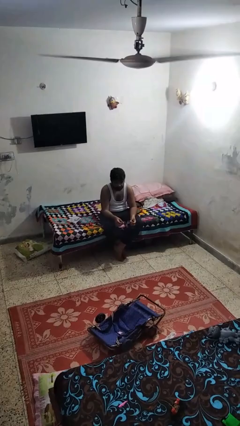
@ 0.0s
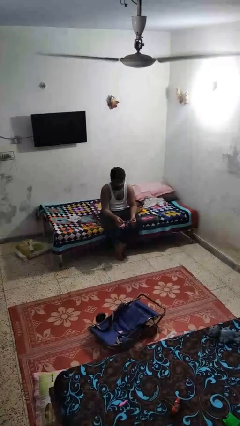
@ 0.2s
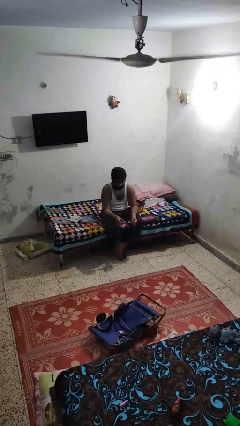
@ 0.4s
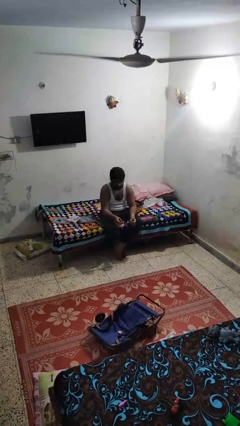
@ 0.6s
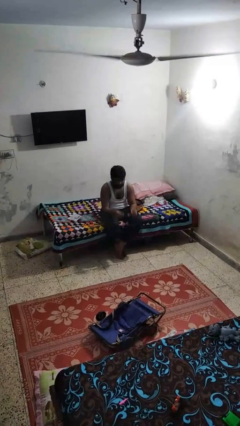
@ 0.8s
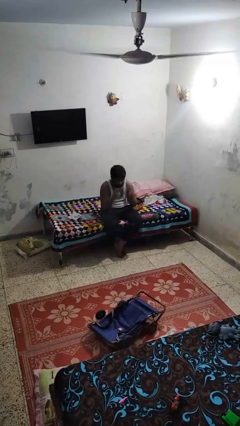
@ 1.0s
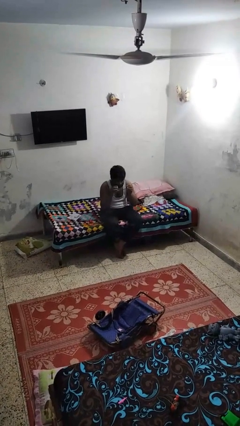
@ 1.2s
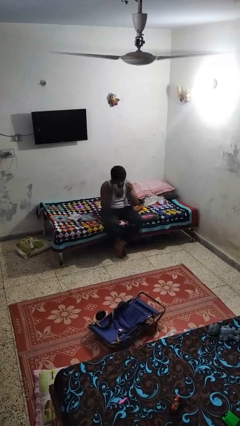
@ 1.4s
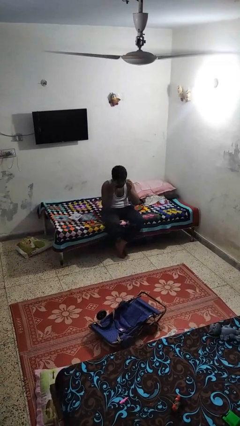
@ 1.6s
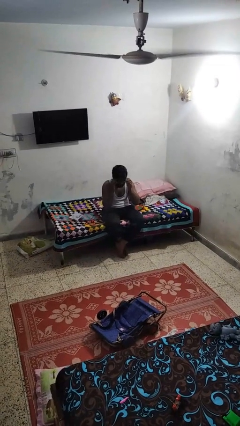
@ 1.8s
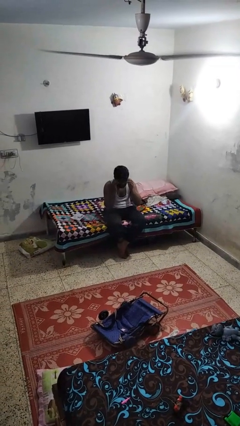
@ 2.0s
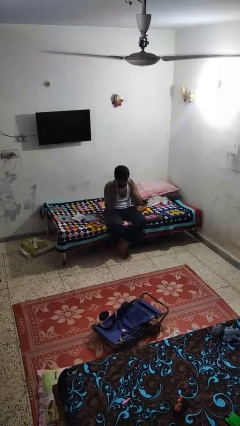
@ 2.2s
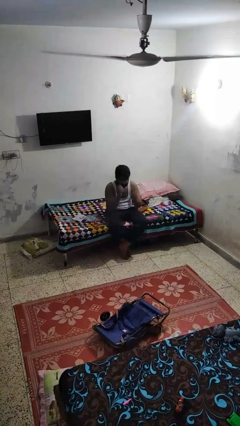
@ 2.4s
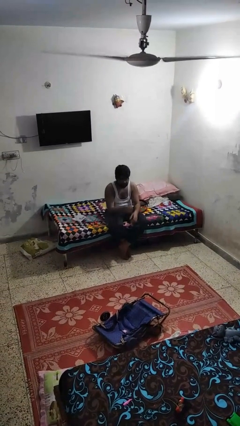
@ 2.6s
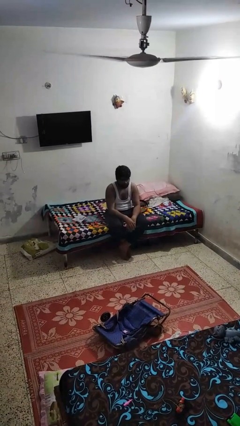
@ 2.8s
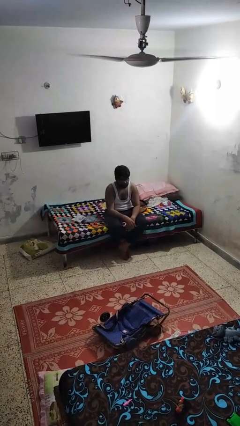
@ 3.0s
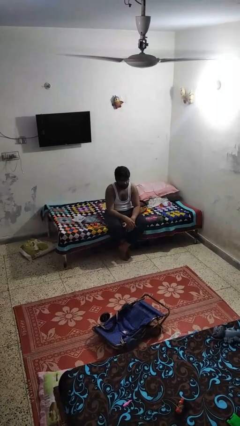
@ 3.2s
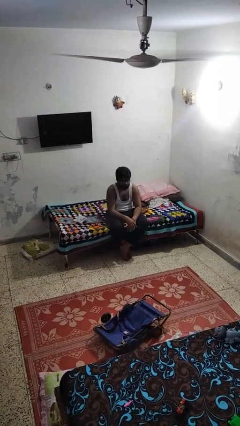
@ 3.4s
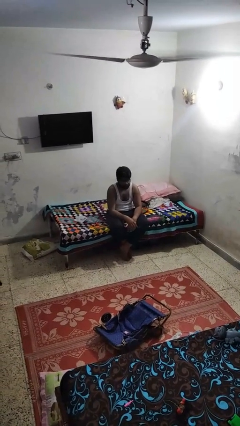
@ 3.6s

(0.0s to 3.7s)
person puts on glasses

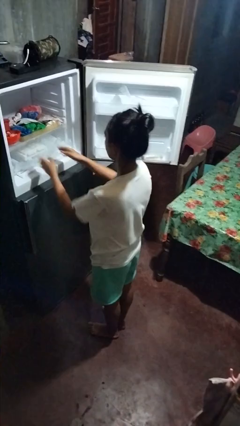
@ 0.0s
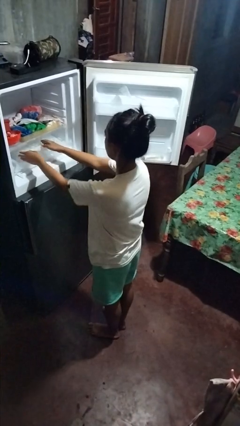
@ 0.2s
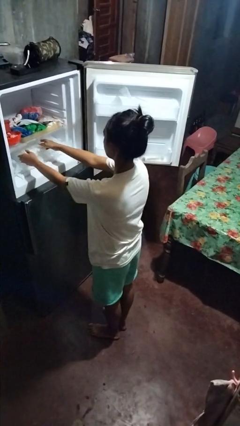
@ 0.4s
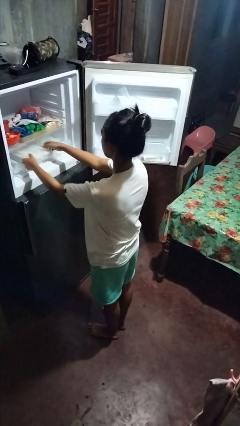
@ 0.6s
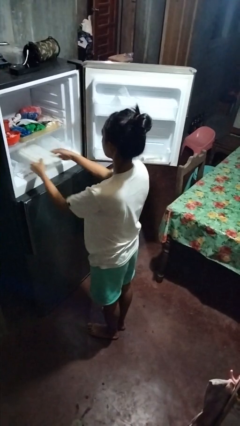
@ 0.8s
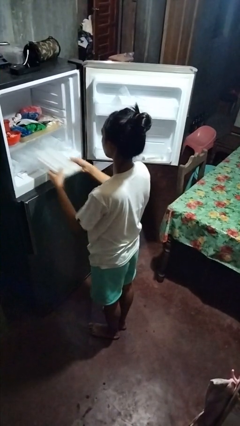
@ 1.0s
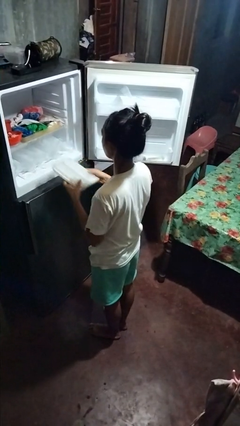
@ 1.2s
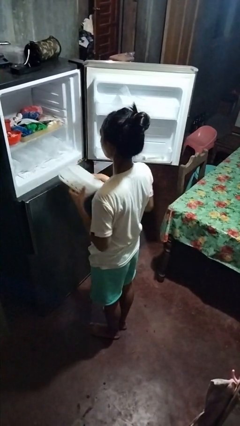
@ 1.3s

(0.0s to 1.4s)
person takes object from refrigerator

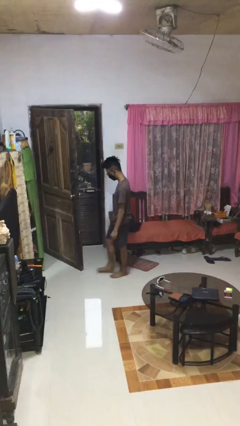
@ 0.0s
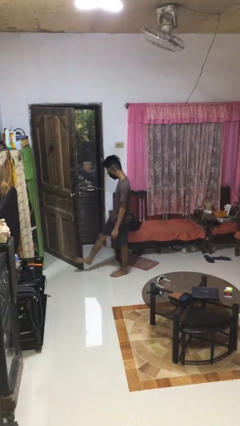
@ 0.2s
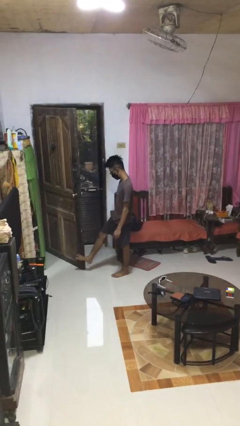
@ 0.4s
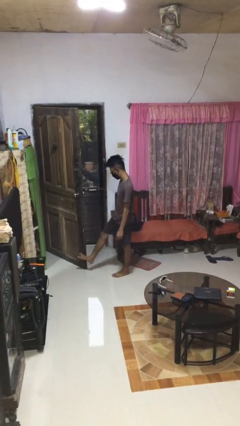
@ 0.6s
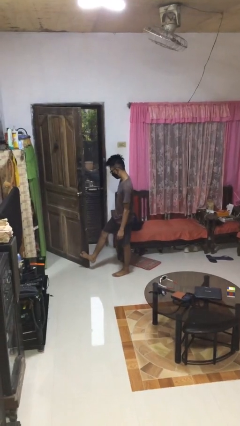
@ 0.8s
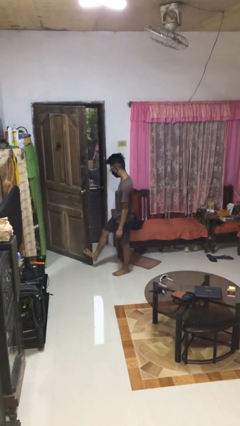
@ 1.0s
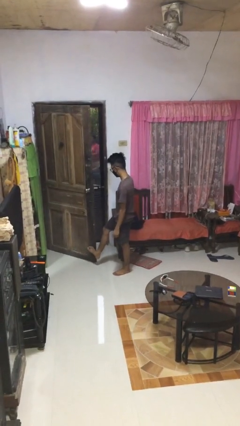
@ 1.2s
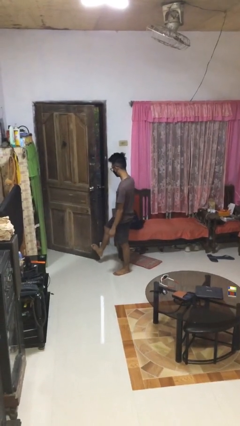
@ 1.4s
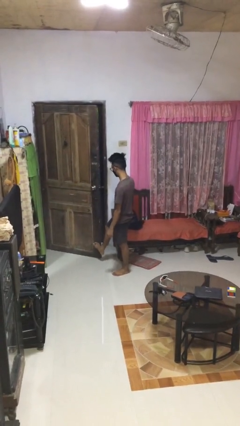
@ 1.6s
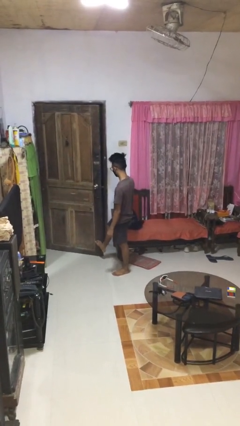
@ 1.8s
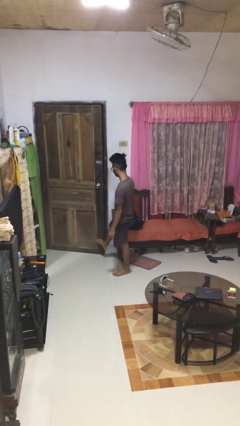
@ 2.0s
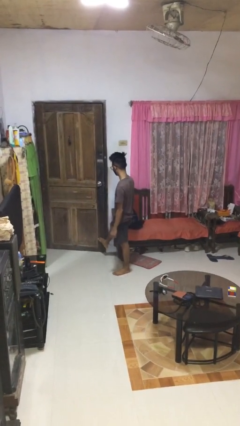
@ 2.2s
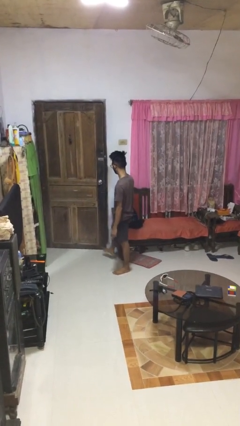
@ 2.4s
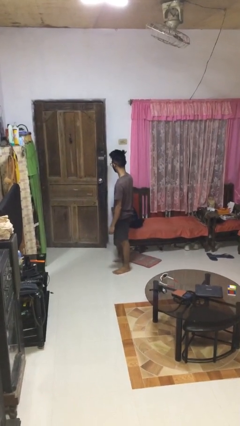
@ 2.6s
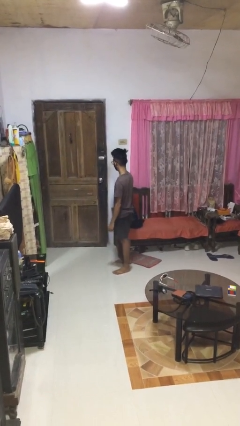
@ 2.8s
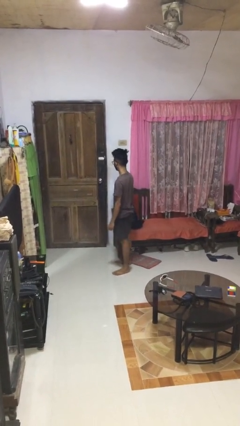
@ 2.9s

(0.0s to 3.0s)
person closes door with foot

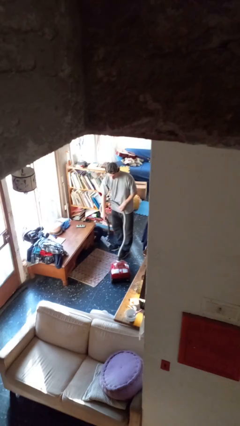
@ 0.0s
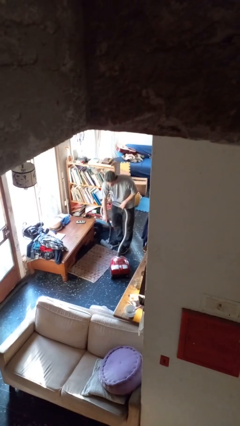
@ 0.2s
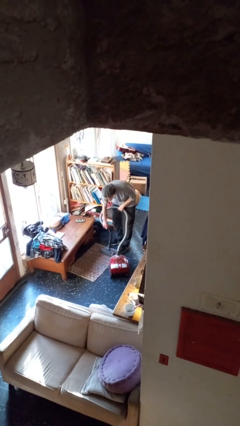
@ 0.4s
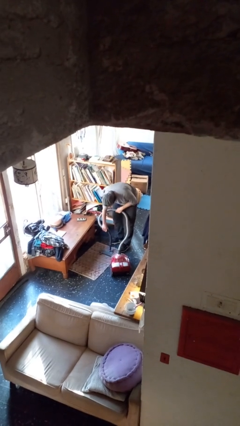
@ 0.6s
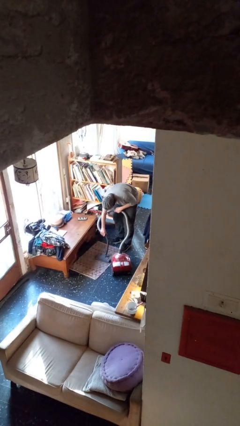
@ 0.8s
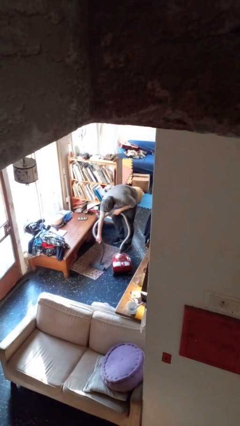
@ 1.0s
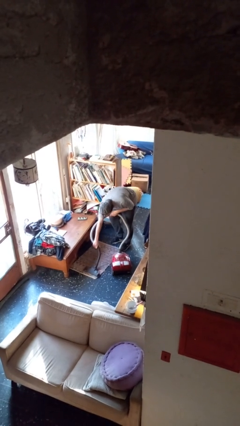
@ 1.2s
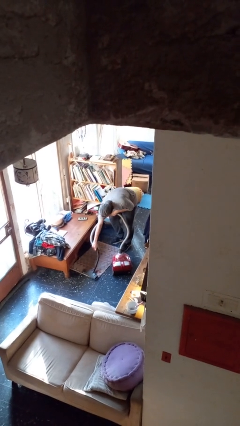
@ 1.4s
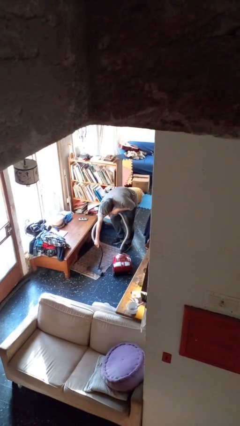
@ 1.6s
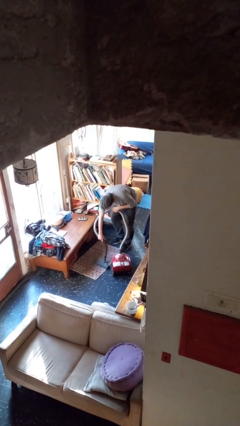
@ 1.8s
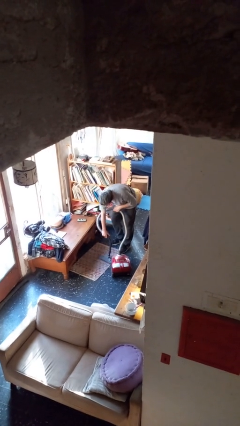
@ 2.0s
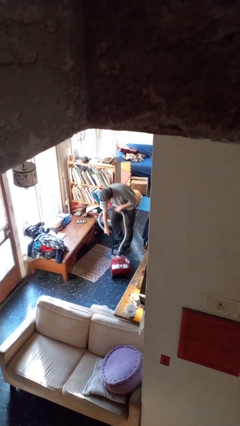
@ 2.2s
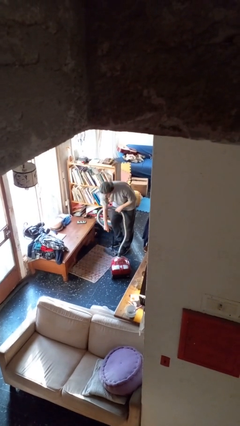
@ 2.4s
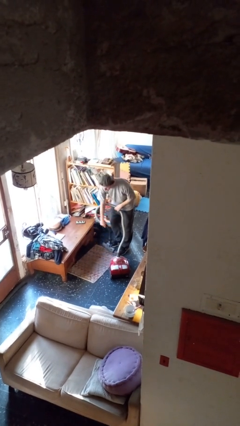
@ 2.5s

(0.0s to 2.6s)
person vacuums carpet

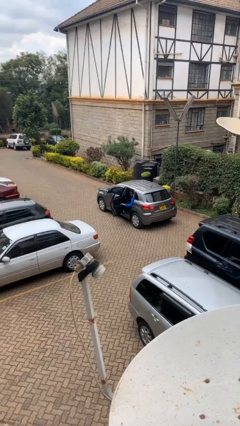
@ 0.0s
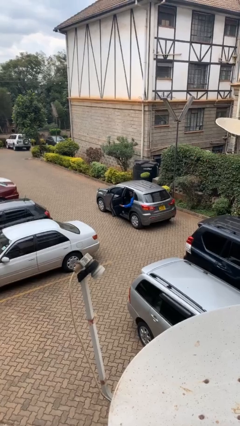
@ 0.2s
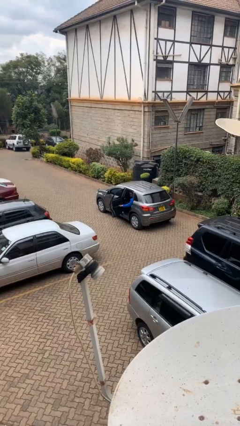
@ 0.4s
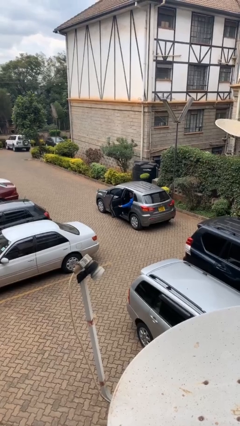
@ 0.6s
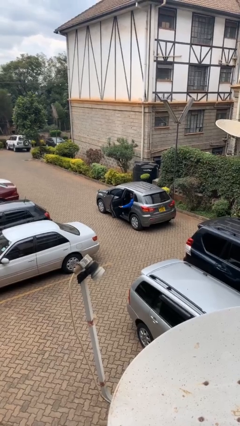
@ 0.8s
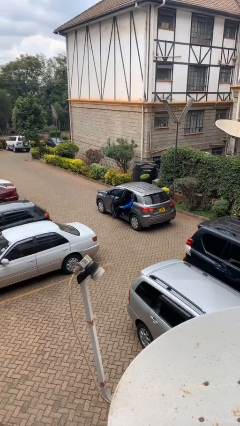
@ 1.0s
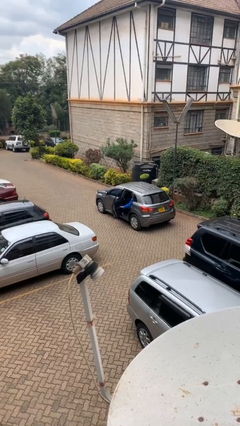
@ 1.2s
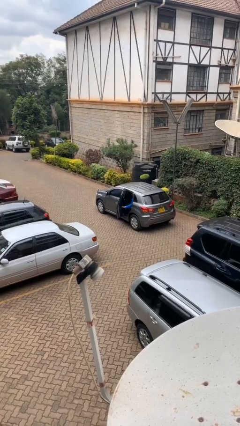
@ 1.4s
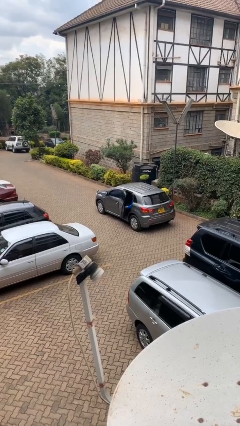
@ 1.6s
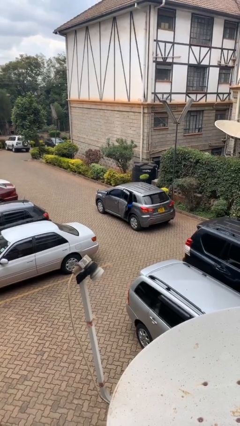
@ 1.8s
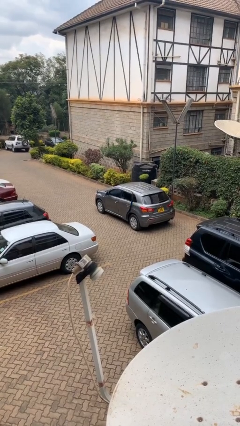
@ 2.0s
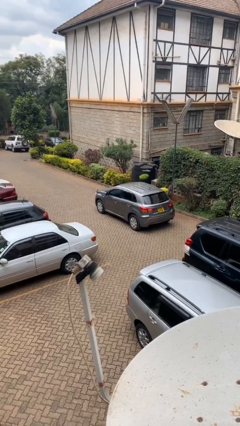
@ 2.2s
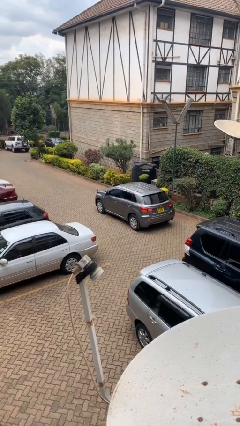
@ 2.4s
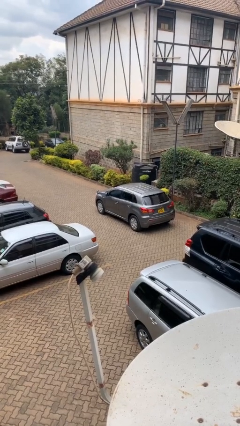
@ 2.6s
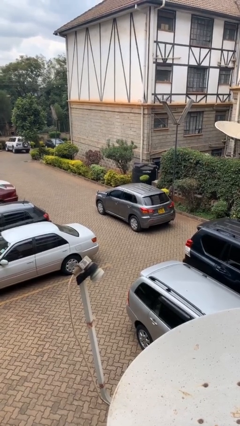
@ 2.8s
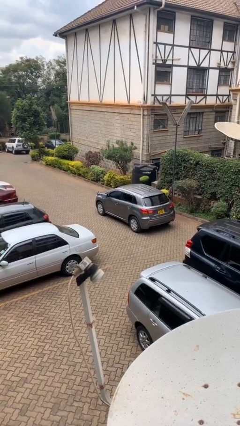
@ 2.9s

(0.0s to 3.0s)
person closes car door

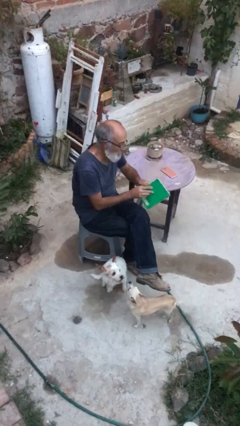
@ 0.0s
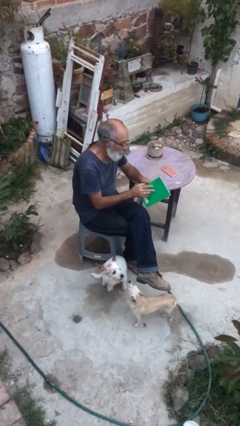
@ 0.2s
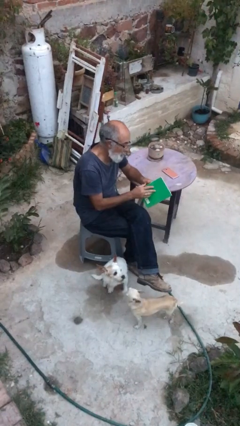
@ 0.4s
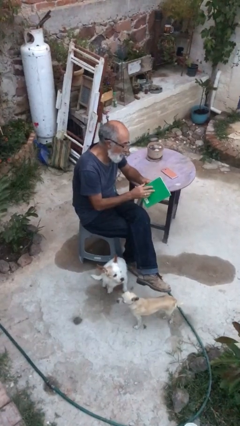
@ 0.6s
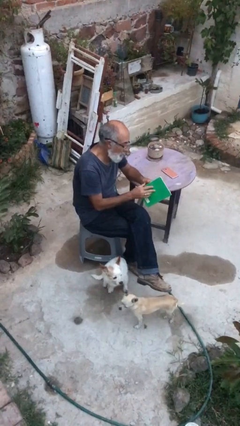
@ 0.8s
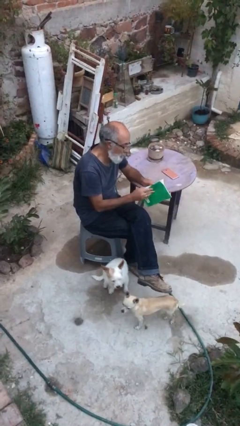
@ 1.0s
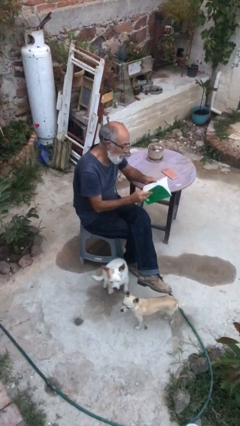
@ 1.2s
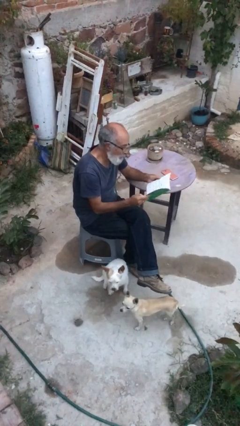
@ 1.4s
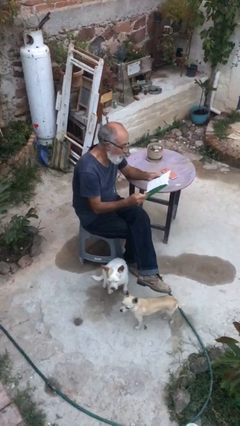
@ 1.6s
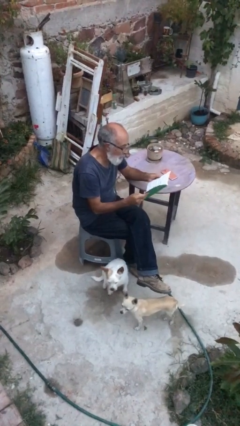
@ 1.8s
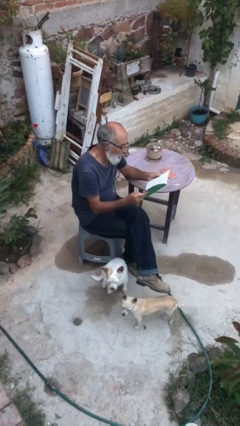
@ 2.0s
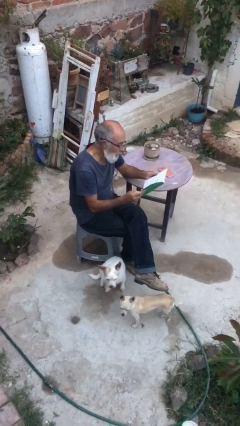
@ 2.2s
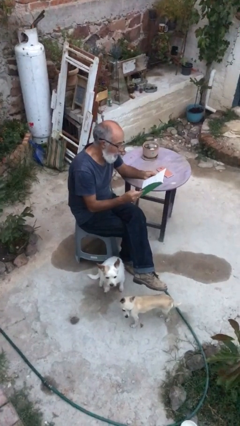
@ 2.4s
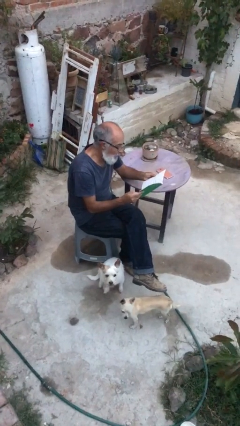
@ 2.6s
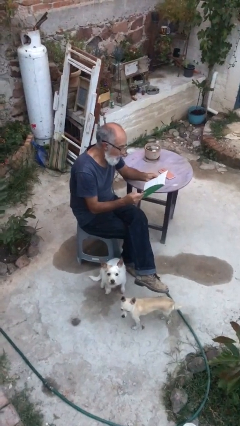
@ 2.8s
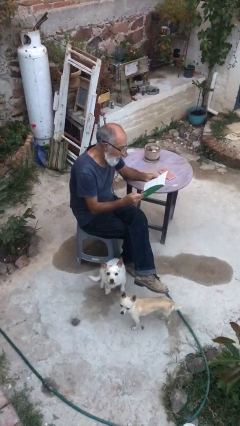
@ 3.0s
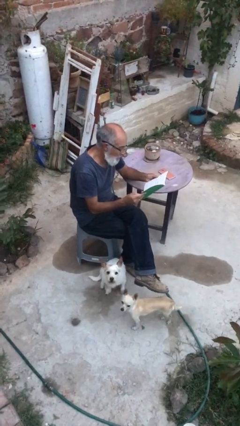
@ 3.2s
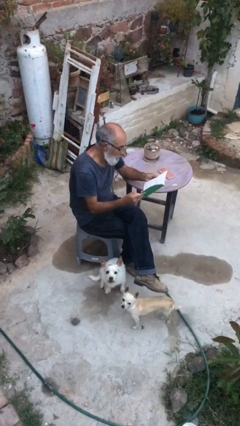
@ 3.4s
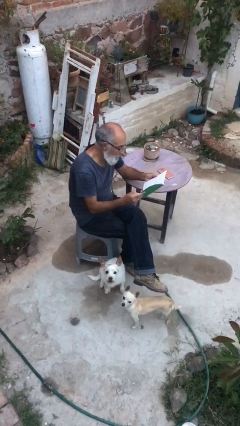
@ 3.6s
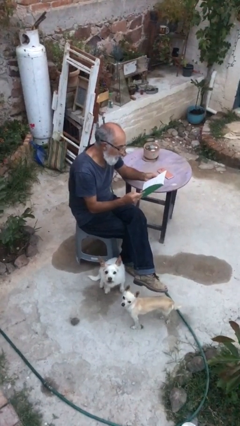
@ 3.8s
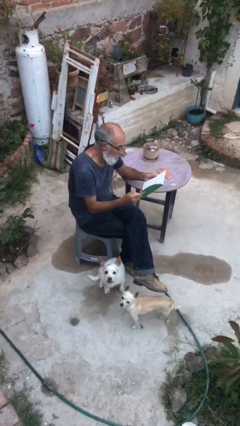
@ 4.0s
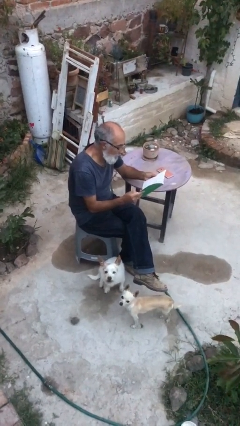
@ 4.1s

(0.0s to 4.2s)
person reads document
